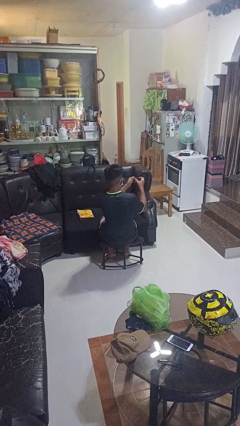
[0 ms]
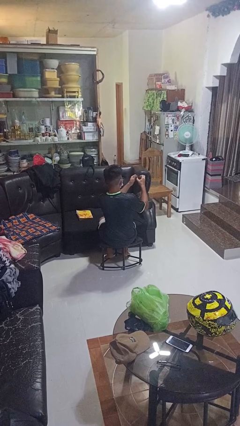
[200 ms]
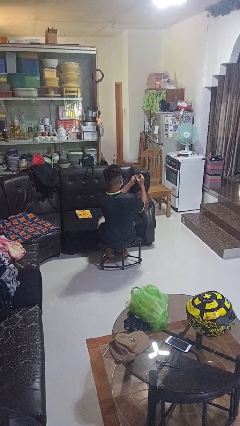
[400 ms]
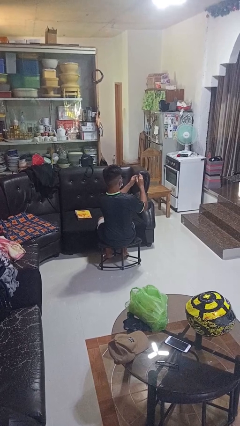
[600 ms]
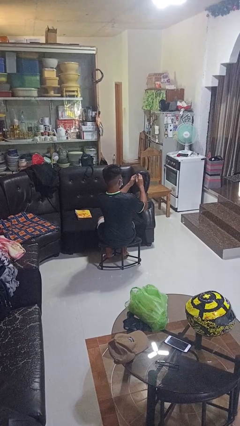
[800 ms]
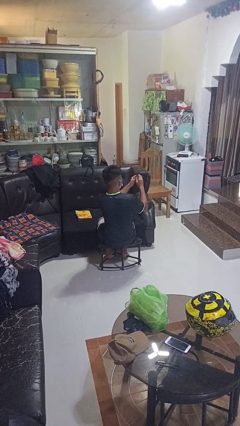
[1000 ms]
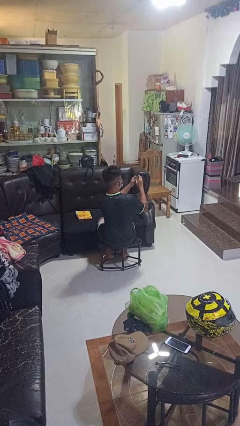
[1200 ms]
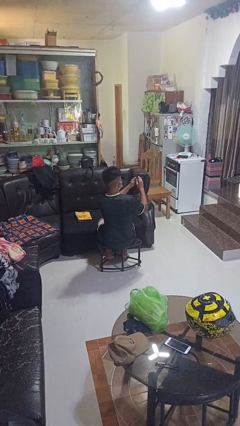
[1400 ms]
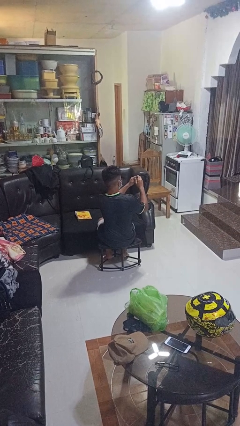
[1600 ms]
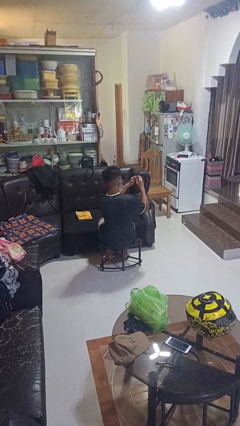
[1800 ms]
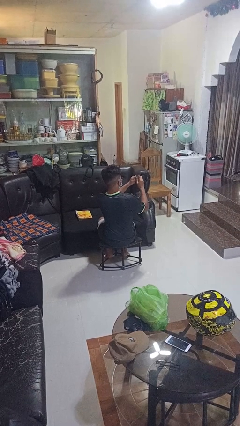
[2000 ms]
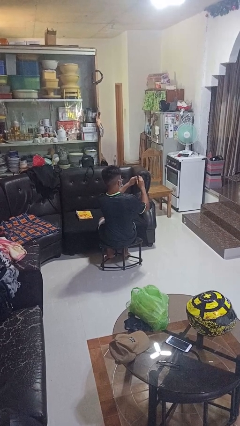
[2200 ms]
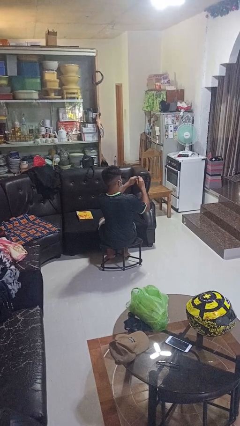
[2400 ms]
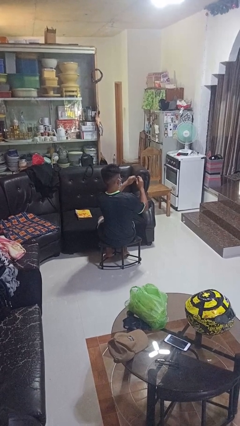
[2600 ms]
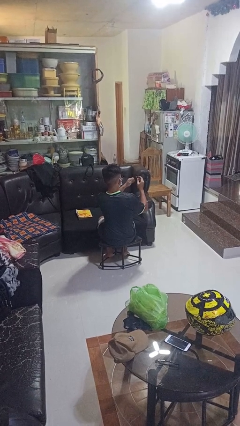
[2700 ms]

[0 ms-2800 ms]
person clips fingernails

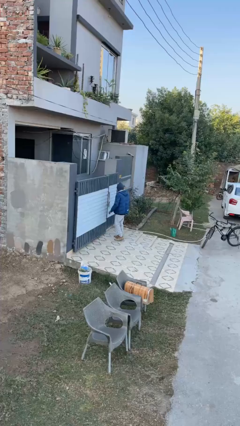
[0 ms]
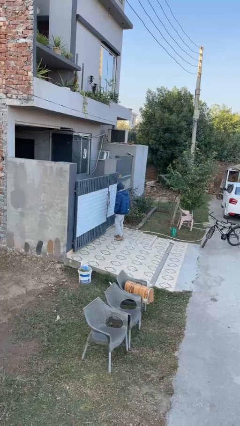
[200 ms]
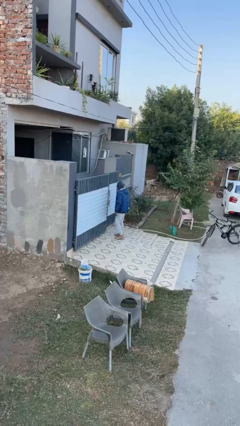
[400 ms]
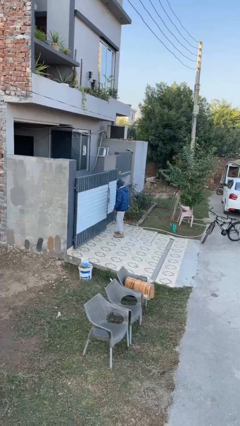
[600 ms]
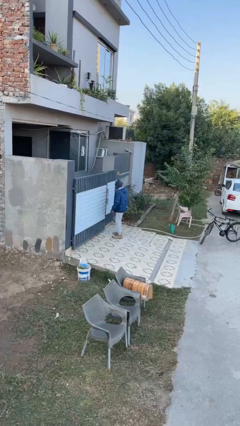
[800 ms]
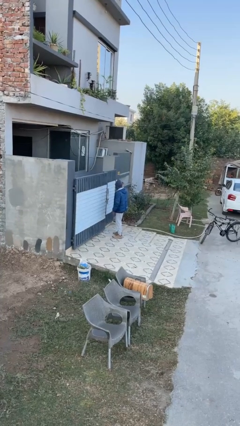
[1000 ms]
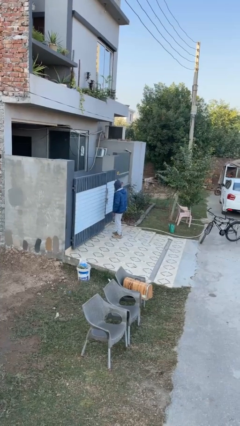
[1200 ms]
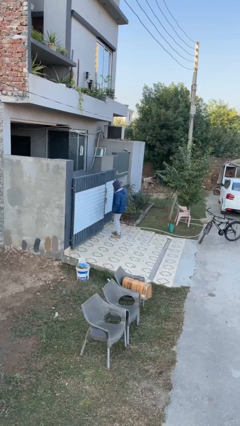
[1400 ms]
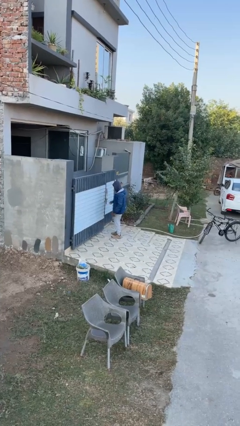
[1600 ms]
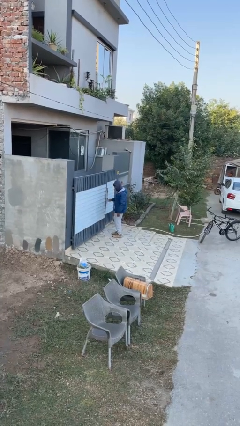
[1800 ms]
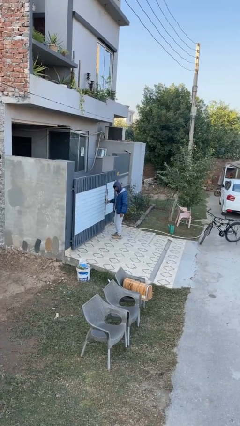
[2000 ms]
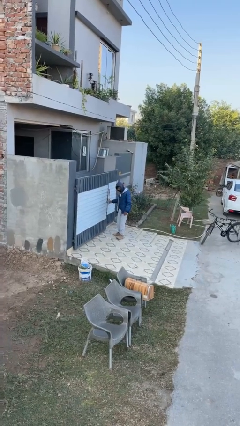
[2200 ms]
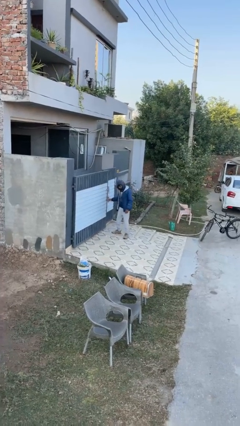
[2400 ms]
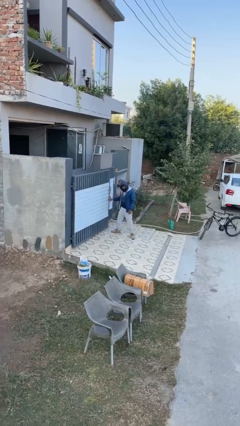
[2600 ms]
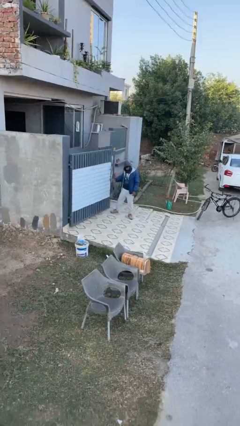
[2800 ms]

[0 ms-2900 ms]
person opens facility door

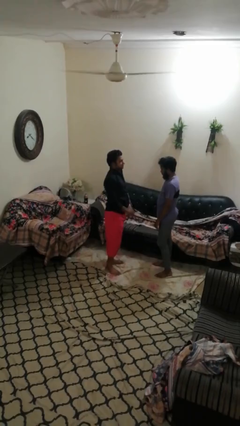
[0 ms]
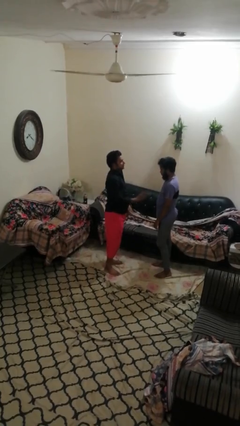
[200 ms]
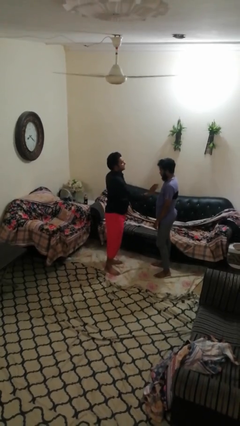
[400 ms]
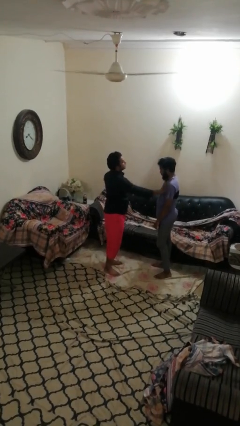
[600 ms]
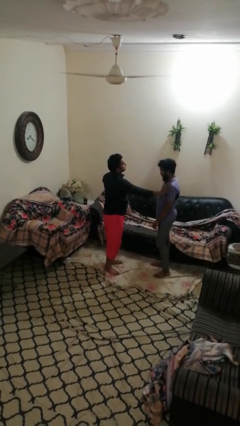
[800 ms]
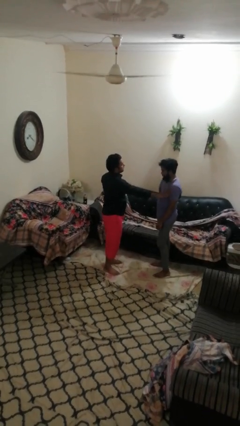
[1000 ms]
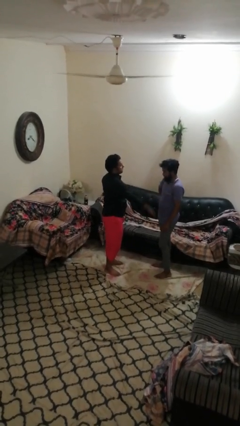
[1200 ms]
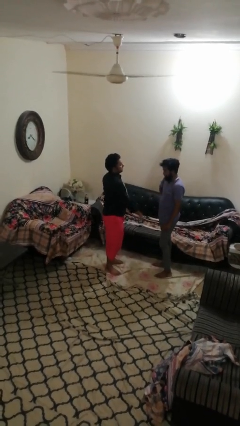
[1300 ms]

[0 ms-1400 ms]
person shoves person

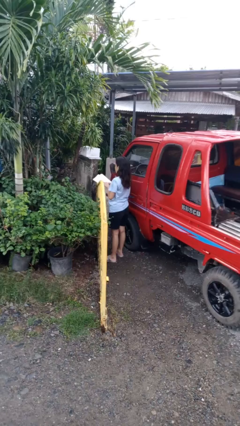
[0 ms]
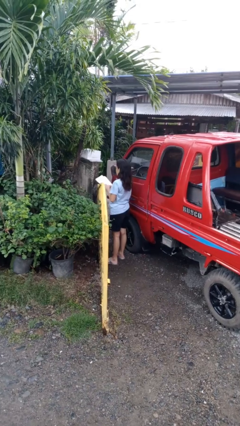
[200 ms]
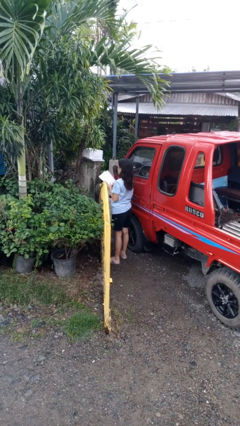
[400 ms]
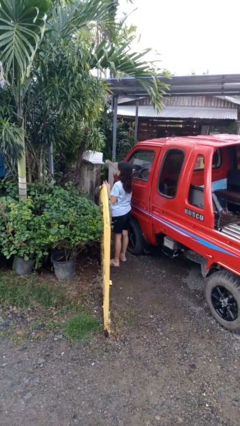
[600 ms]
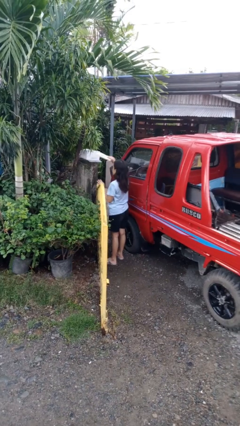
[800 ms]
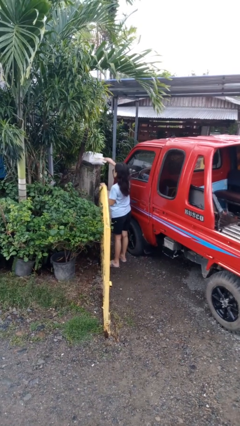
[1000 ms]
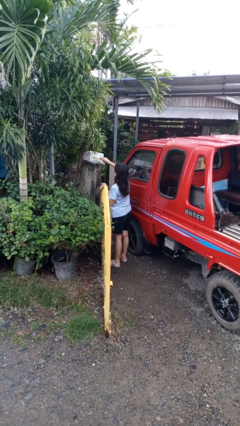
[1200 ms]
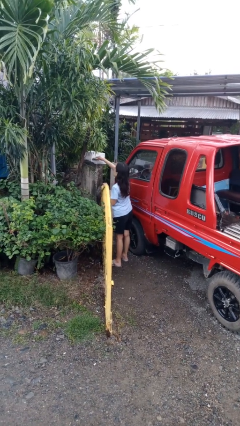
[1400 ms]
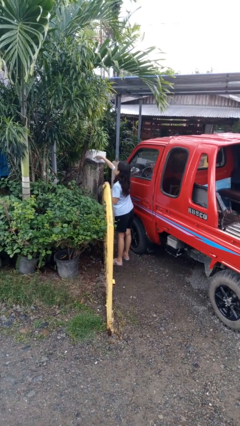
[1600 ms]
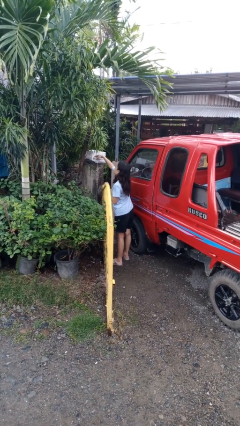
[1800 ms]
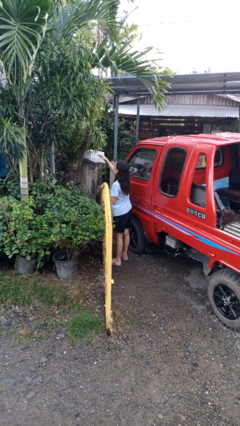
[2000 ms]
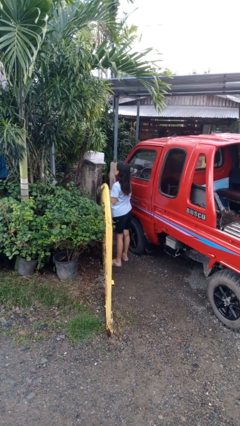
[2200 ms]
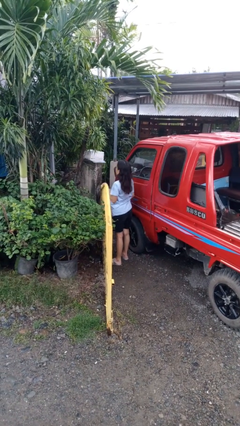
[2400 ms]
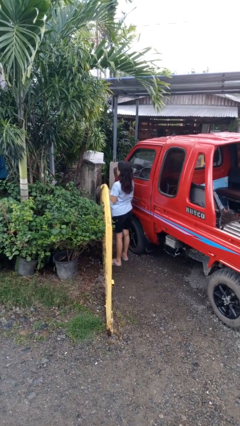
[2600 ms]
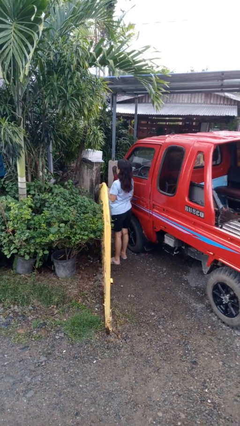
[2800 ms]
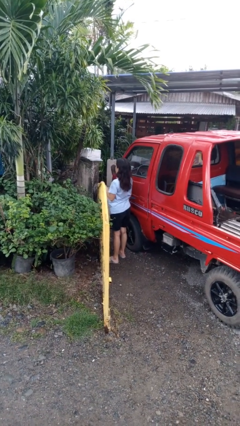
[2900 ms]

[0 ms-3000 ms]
person puts letters in mailbox

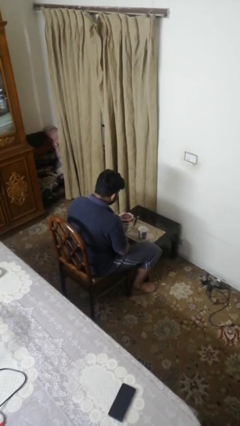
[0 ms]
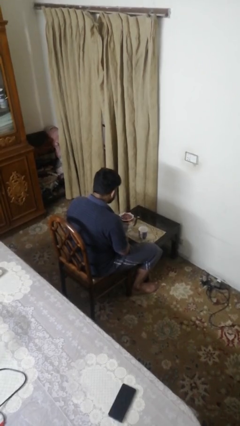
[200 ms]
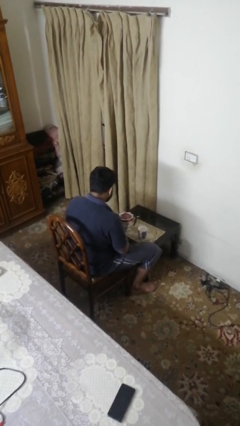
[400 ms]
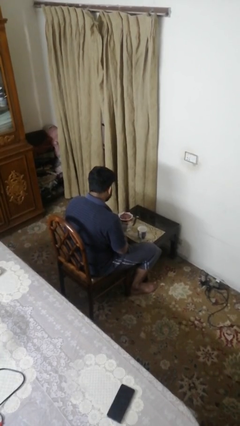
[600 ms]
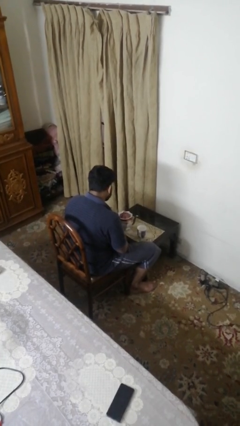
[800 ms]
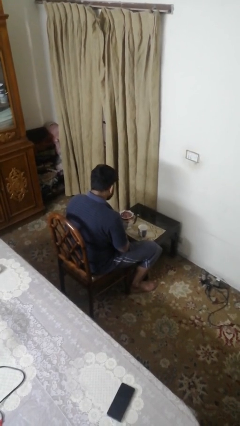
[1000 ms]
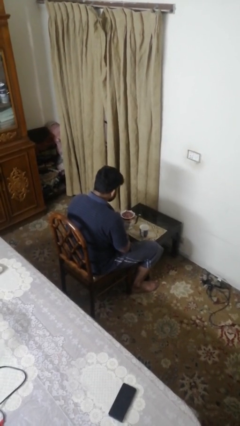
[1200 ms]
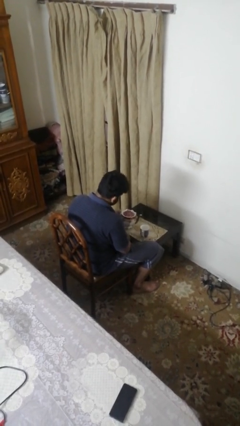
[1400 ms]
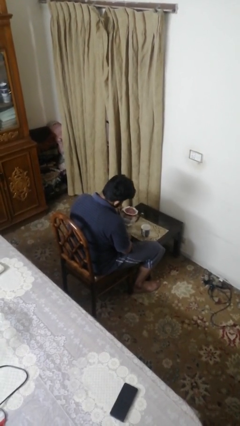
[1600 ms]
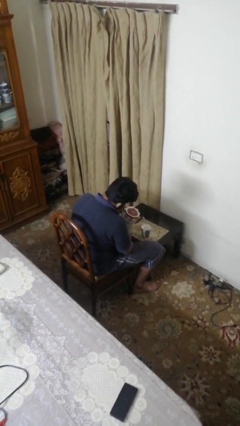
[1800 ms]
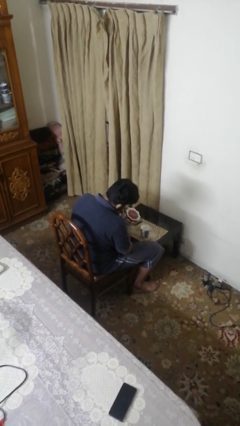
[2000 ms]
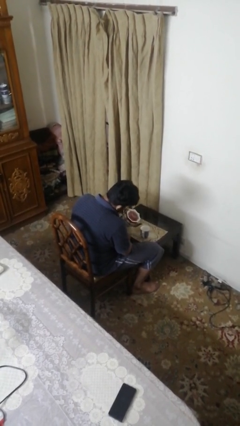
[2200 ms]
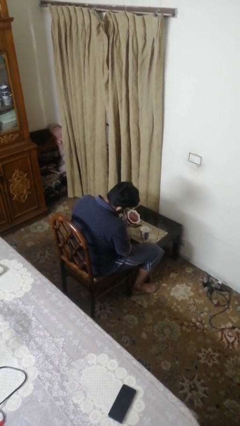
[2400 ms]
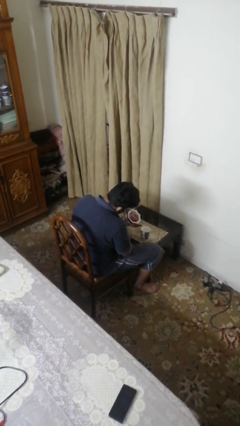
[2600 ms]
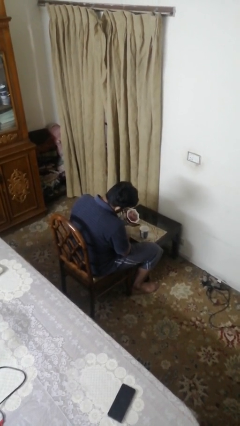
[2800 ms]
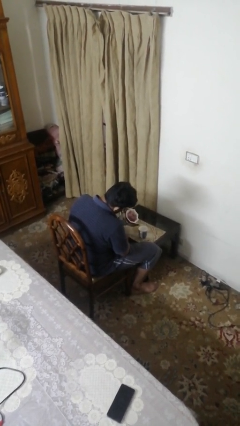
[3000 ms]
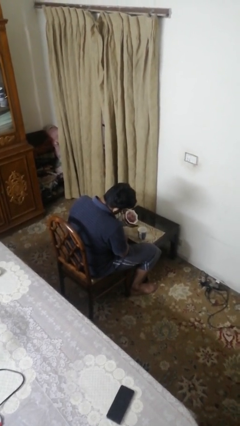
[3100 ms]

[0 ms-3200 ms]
person pours coffee into mug

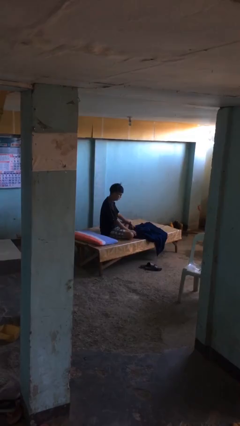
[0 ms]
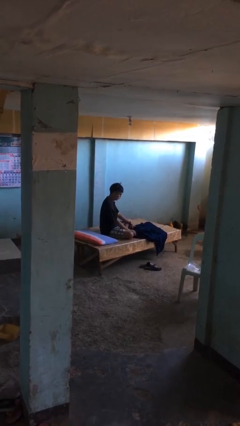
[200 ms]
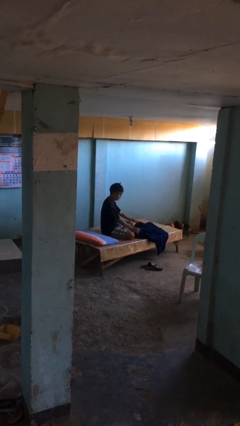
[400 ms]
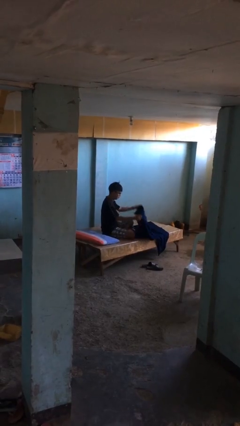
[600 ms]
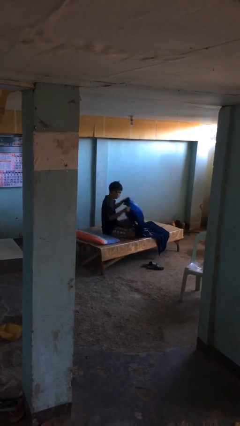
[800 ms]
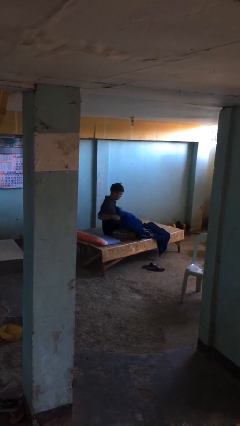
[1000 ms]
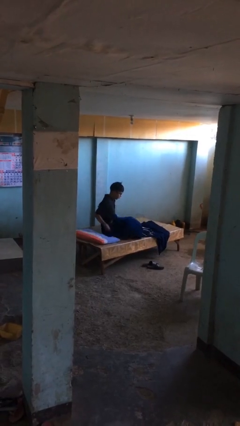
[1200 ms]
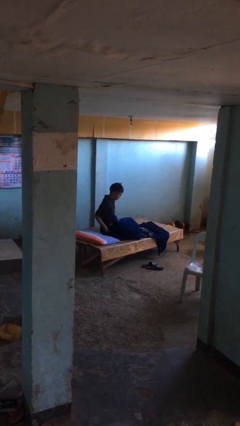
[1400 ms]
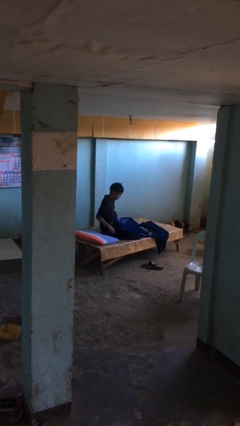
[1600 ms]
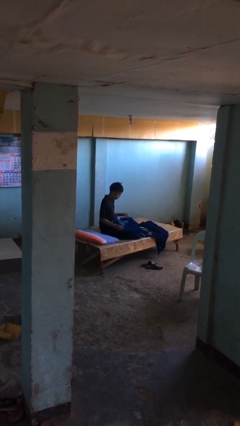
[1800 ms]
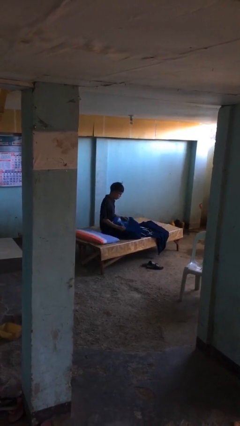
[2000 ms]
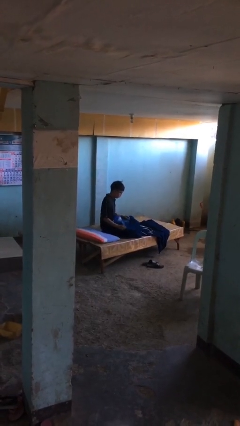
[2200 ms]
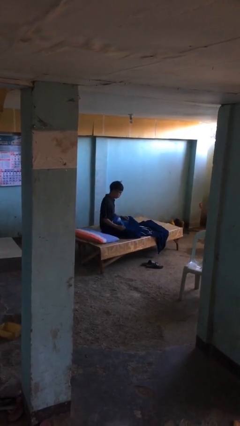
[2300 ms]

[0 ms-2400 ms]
person covers with blanket

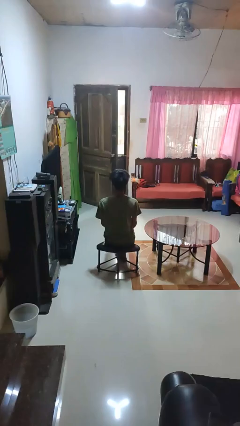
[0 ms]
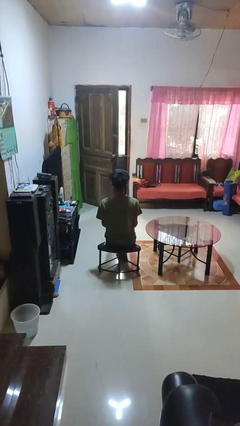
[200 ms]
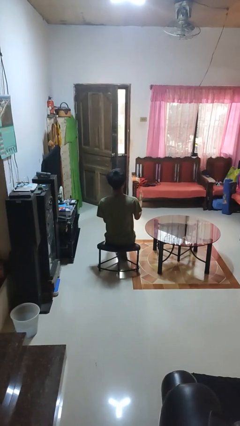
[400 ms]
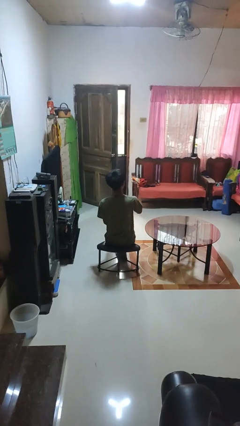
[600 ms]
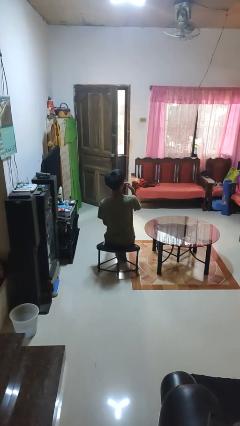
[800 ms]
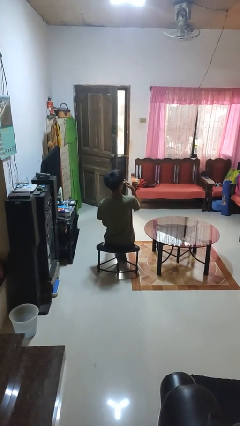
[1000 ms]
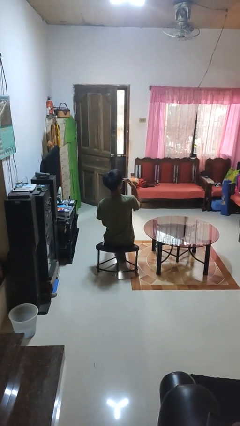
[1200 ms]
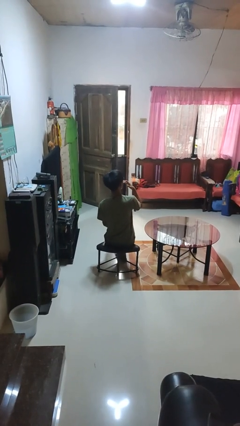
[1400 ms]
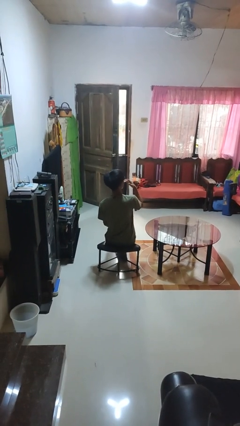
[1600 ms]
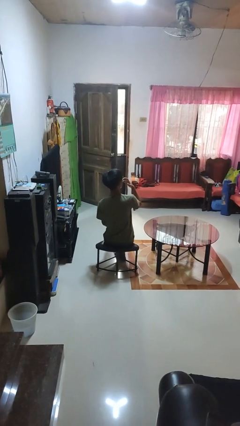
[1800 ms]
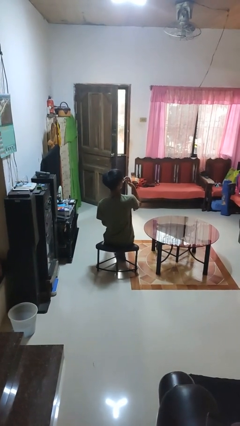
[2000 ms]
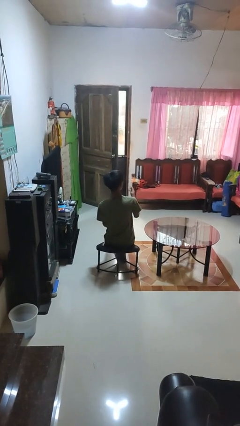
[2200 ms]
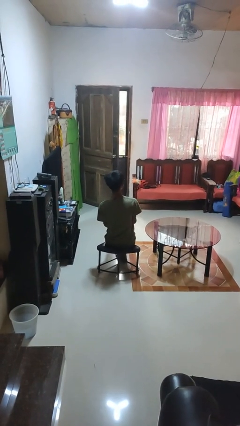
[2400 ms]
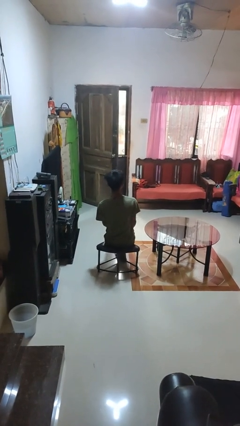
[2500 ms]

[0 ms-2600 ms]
person licks fingers
